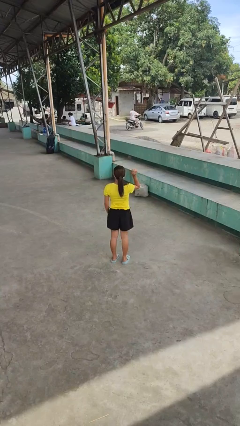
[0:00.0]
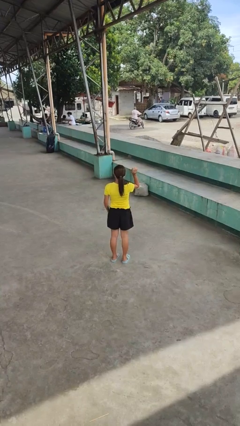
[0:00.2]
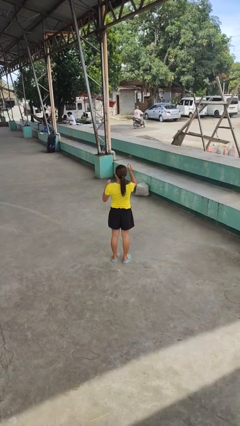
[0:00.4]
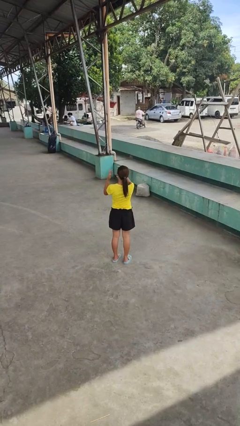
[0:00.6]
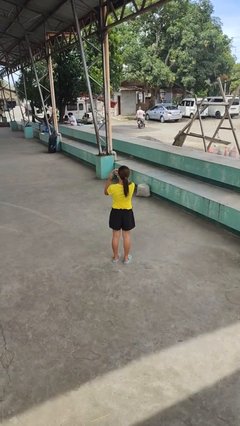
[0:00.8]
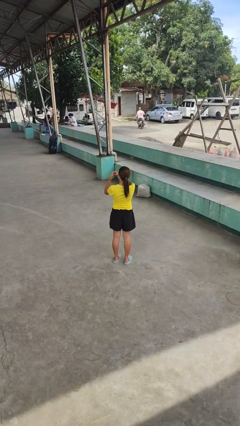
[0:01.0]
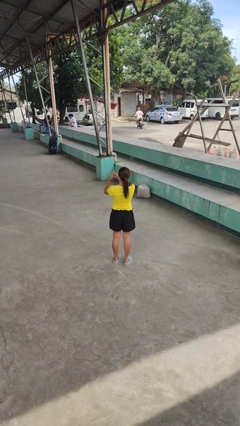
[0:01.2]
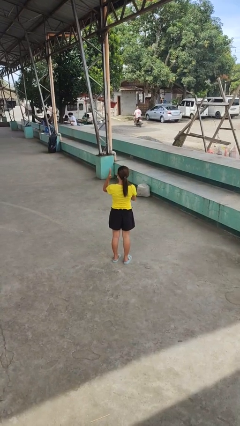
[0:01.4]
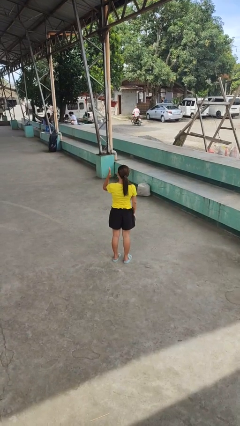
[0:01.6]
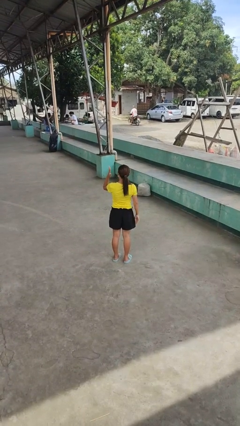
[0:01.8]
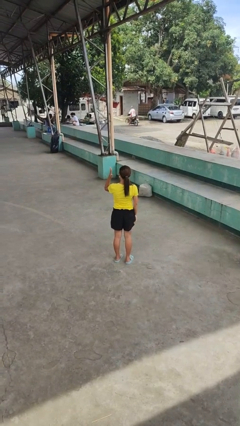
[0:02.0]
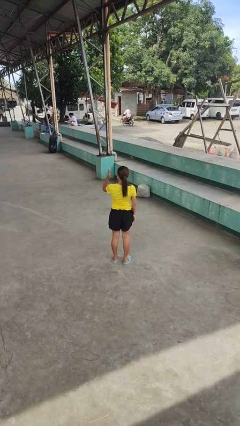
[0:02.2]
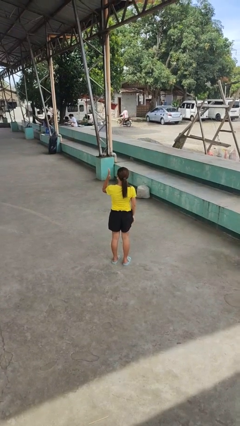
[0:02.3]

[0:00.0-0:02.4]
person puts on ring

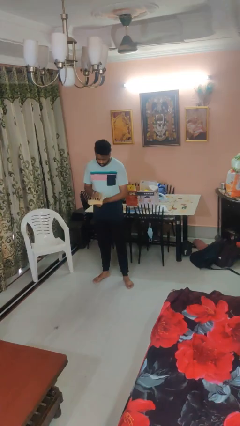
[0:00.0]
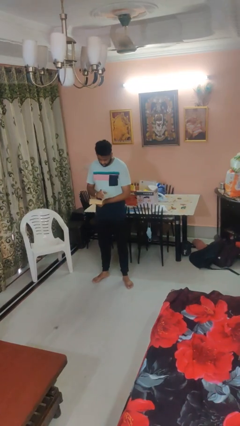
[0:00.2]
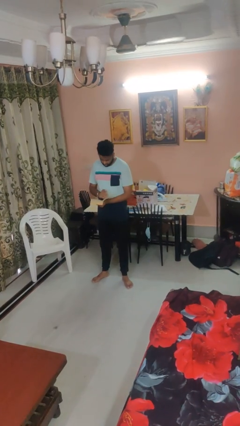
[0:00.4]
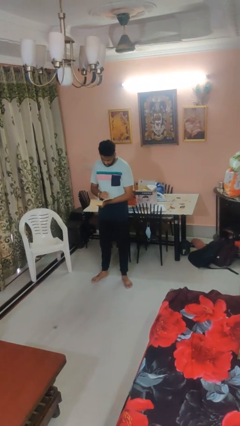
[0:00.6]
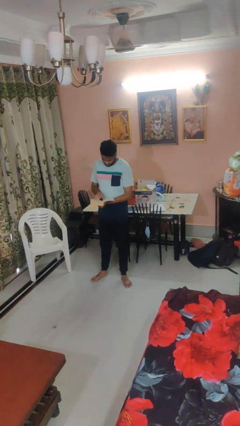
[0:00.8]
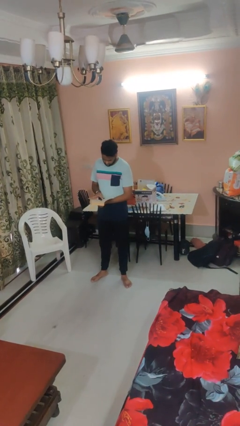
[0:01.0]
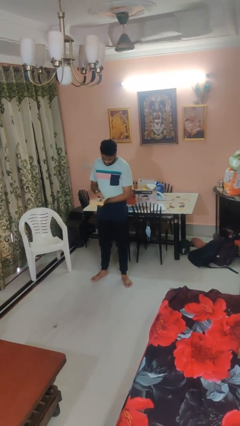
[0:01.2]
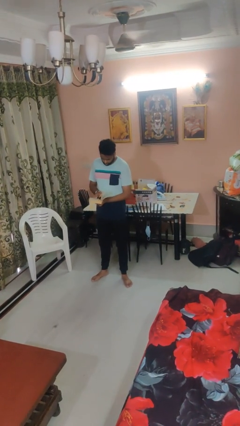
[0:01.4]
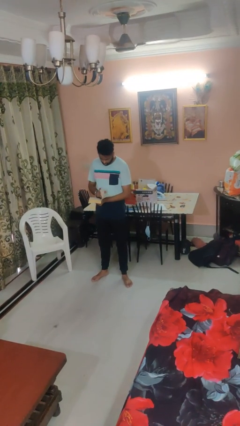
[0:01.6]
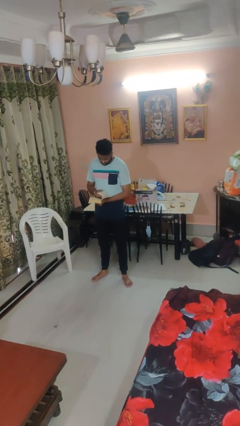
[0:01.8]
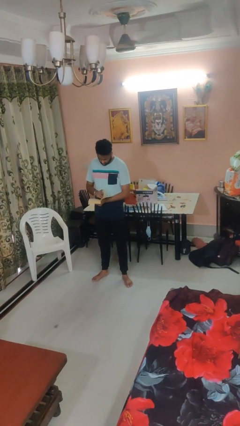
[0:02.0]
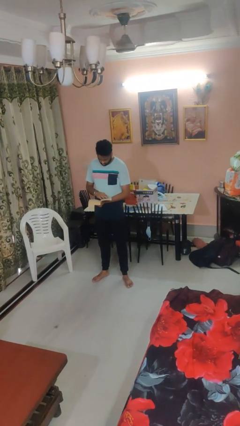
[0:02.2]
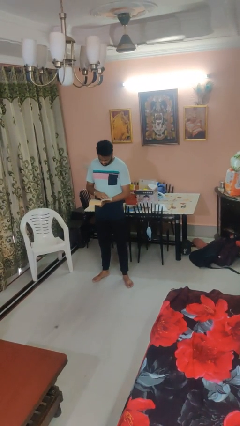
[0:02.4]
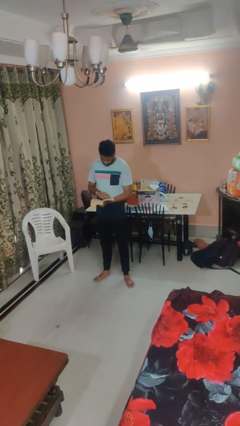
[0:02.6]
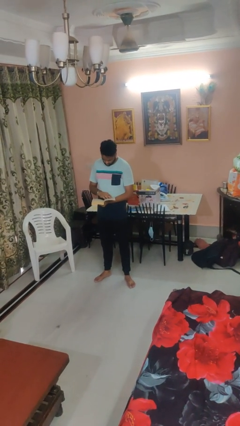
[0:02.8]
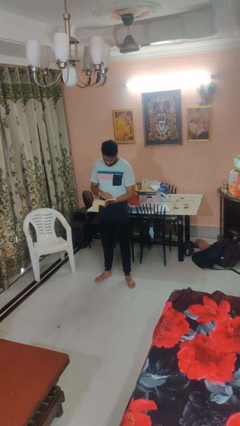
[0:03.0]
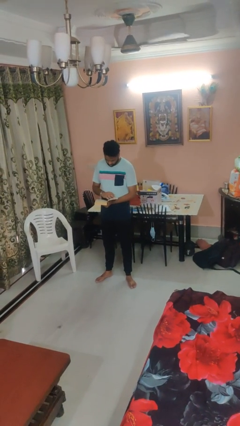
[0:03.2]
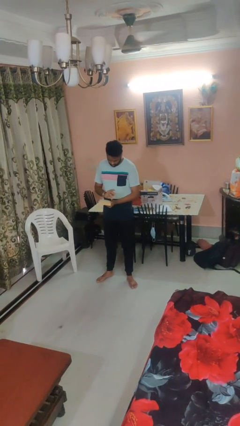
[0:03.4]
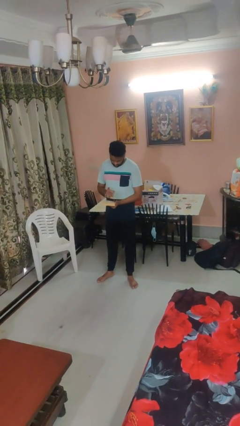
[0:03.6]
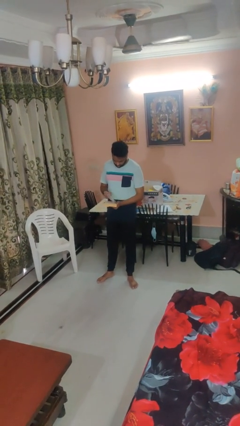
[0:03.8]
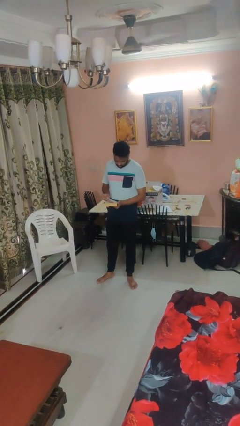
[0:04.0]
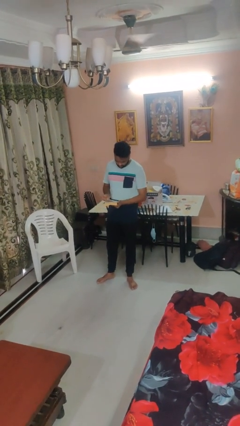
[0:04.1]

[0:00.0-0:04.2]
person reads book

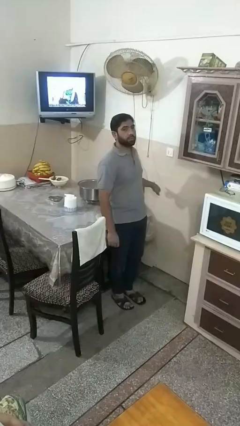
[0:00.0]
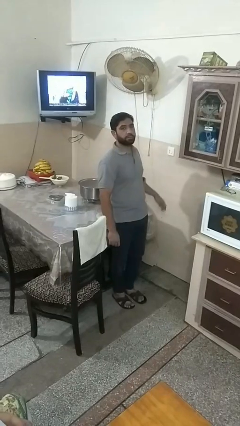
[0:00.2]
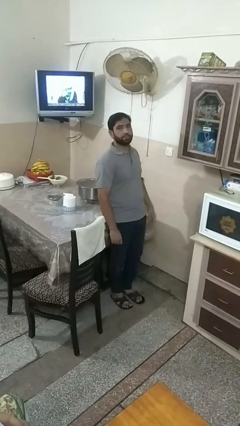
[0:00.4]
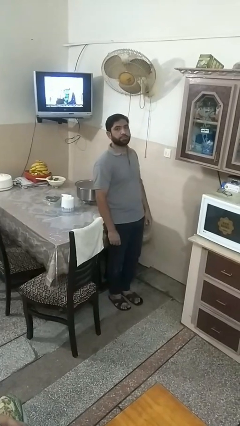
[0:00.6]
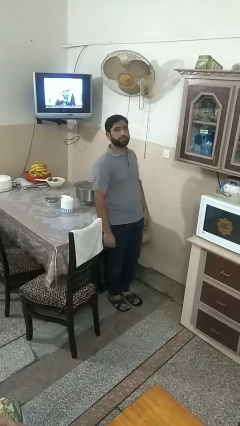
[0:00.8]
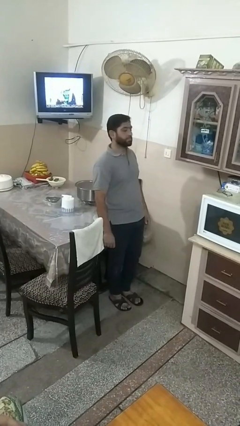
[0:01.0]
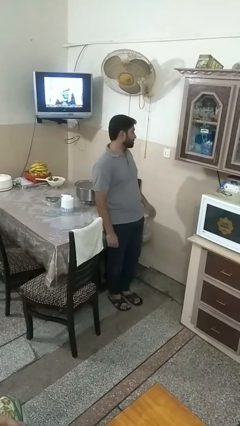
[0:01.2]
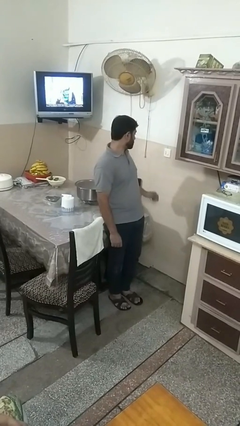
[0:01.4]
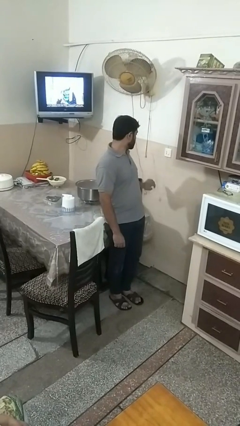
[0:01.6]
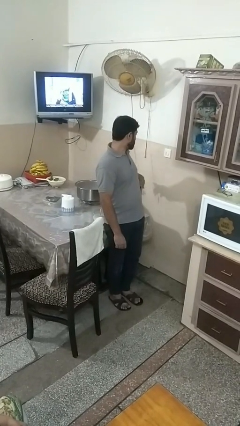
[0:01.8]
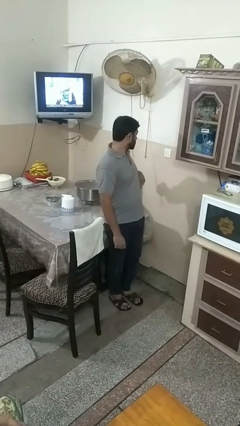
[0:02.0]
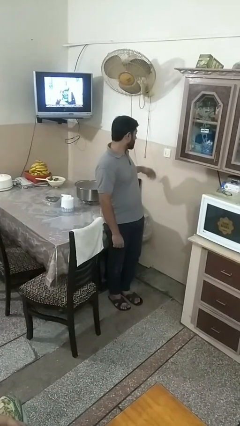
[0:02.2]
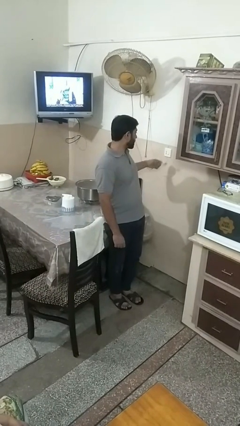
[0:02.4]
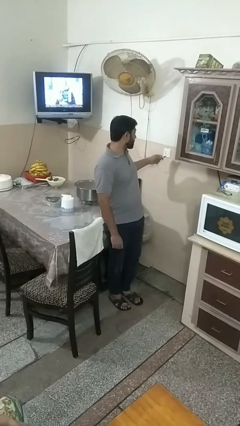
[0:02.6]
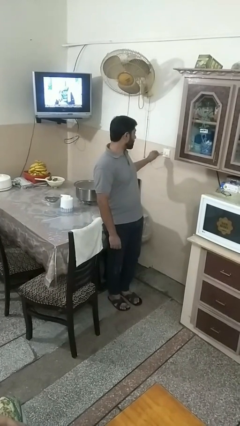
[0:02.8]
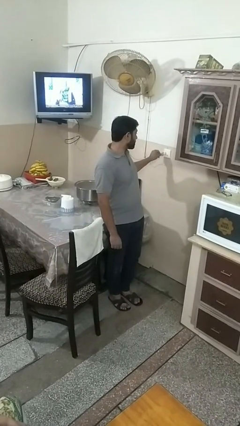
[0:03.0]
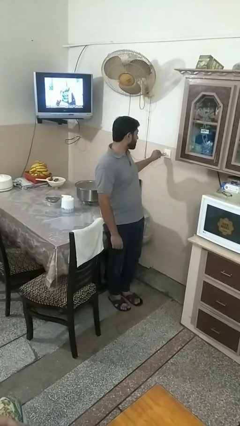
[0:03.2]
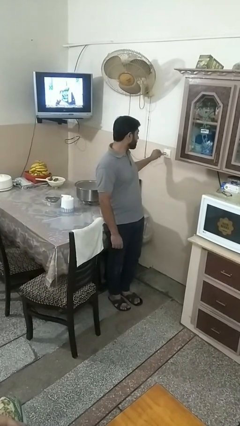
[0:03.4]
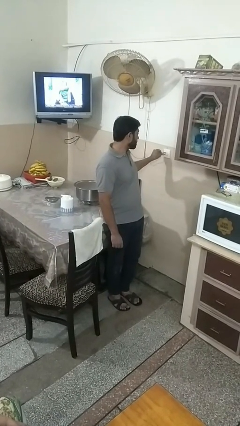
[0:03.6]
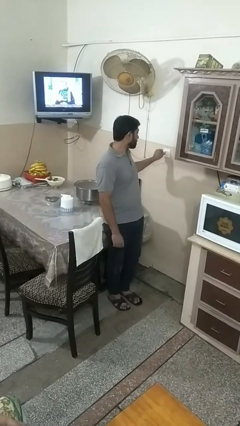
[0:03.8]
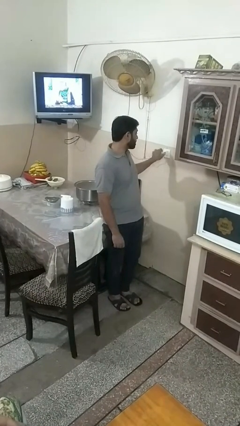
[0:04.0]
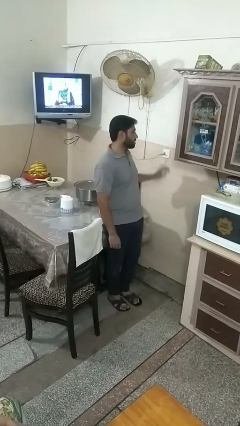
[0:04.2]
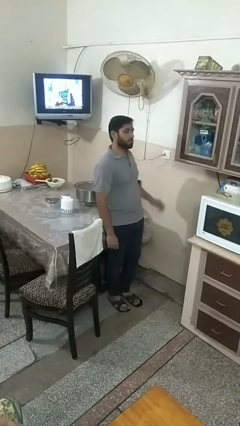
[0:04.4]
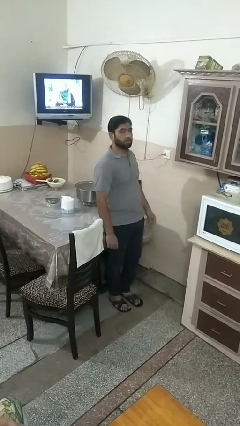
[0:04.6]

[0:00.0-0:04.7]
person plugs into electrical socket

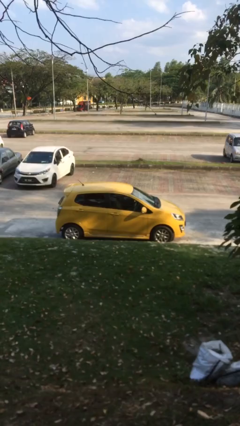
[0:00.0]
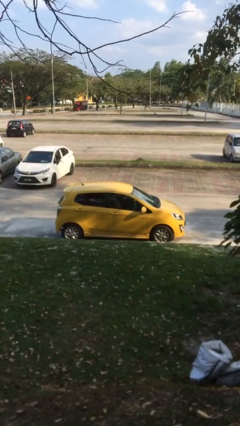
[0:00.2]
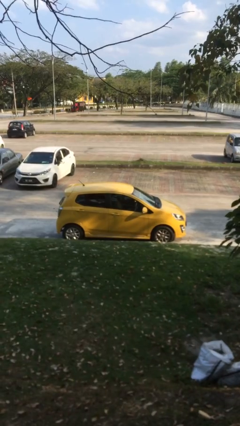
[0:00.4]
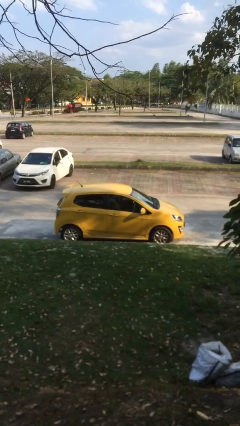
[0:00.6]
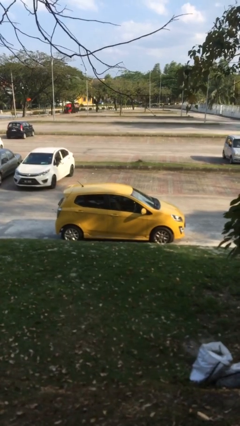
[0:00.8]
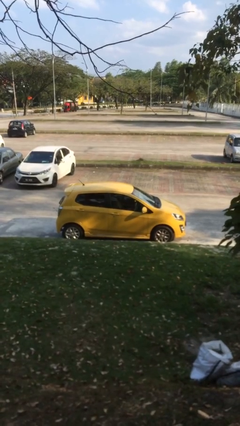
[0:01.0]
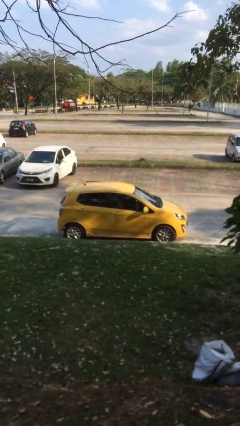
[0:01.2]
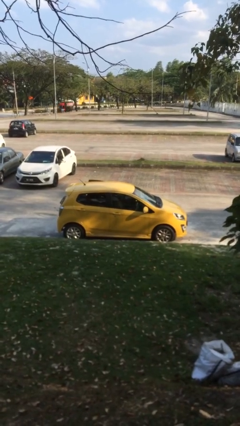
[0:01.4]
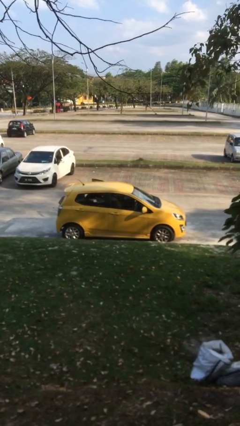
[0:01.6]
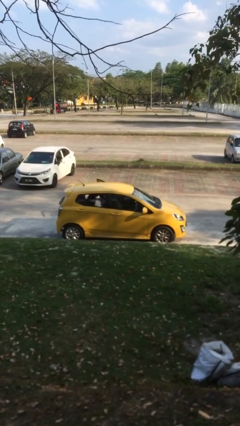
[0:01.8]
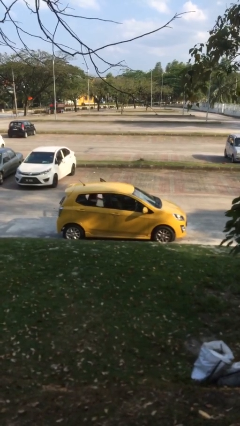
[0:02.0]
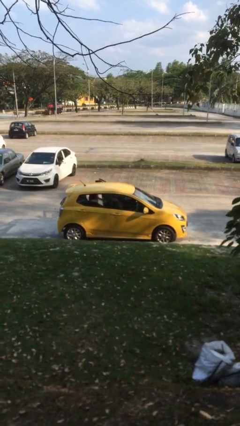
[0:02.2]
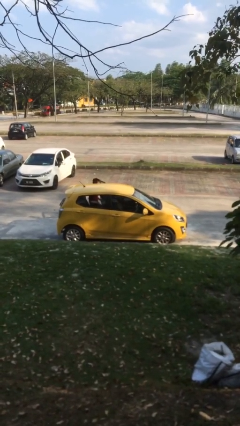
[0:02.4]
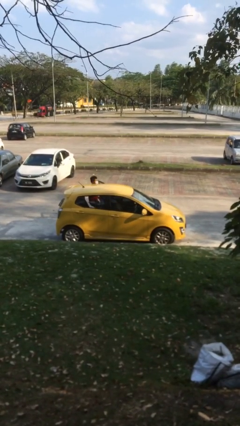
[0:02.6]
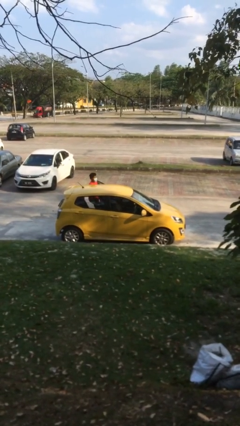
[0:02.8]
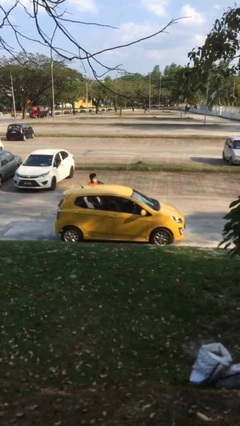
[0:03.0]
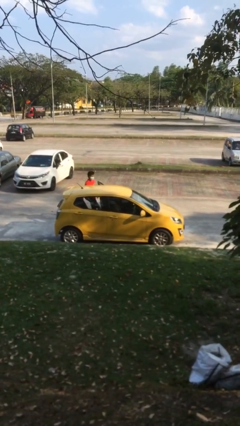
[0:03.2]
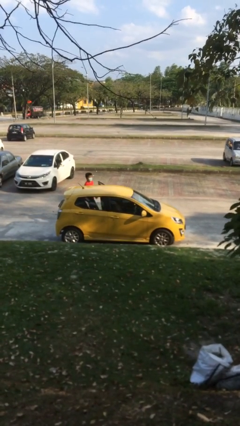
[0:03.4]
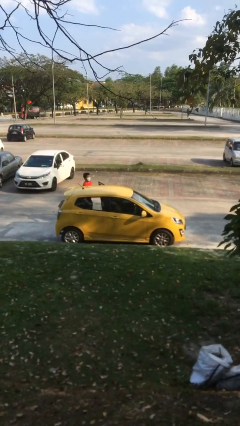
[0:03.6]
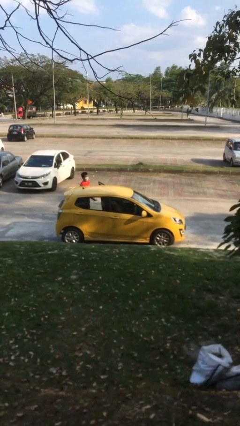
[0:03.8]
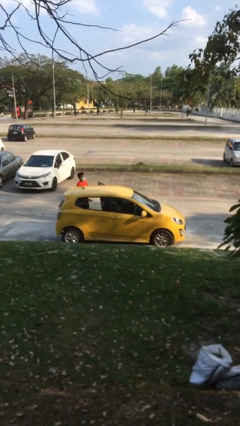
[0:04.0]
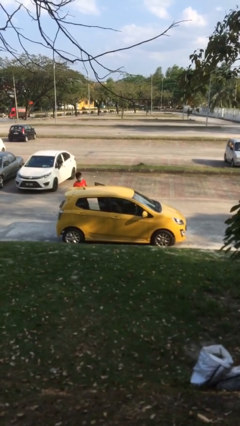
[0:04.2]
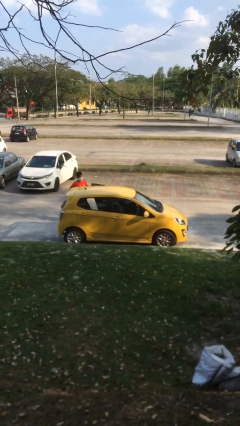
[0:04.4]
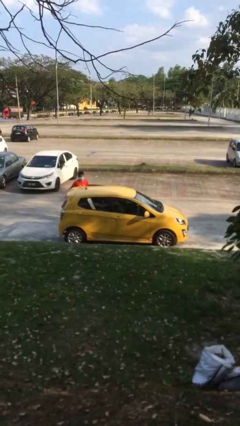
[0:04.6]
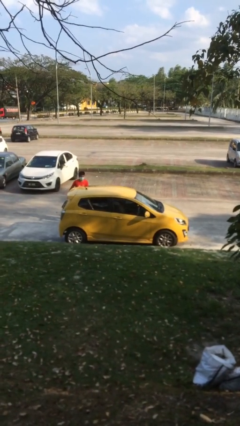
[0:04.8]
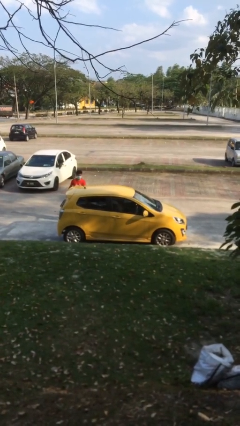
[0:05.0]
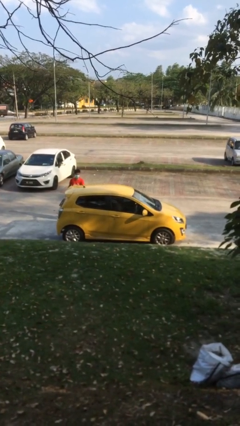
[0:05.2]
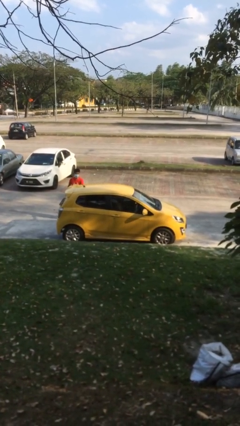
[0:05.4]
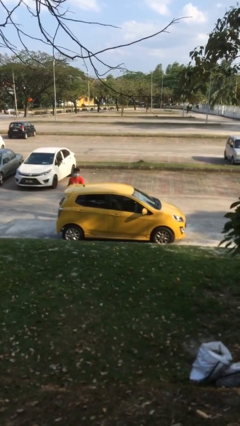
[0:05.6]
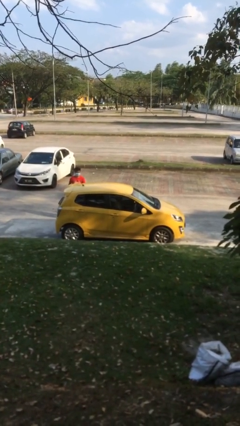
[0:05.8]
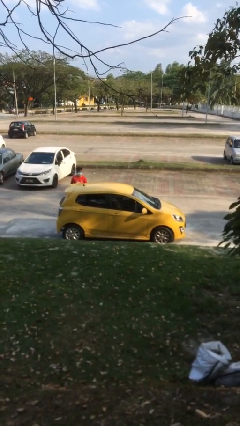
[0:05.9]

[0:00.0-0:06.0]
car drops off person

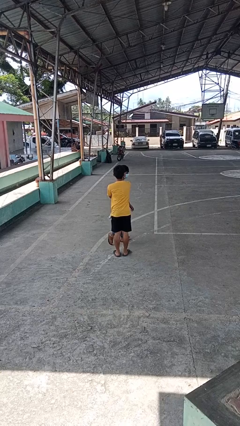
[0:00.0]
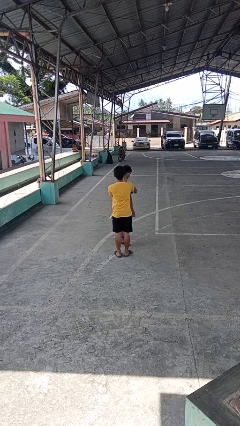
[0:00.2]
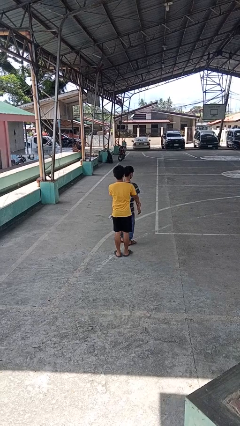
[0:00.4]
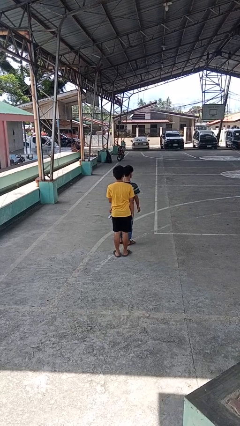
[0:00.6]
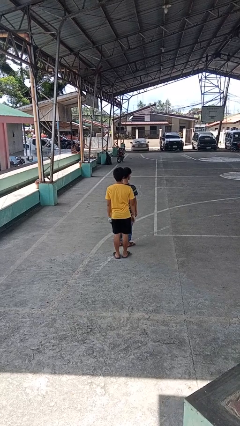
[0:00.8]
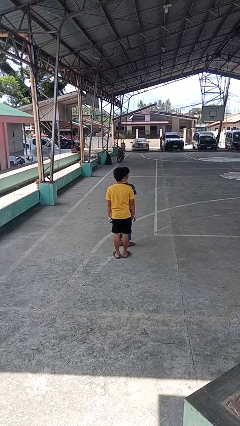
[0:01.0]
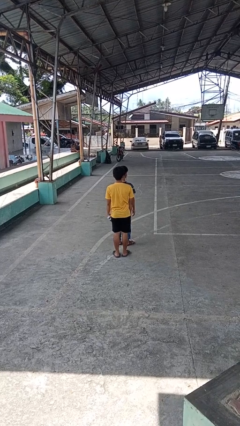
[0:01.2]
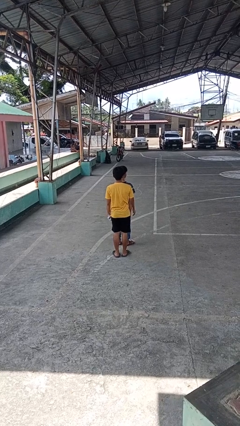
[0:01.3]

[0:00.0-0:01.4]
person spins person around
